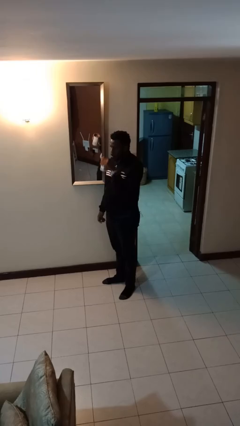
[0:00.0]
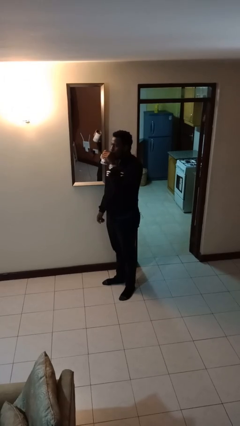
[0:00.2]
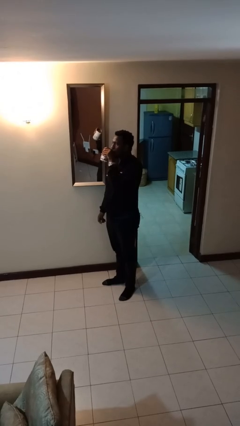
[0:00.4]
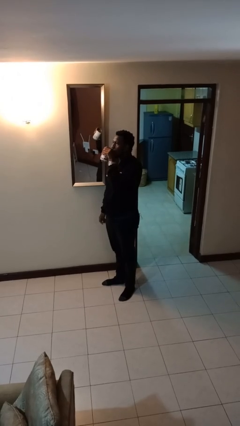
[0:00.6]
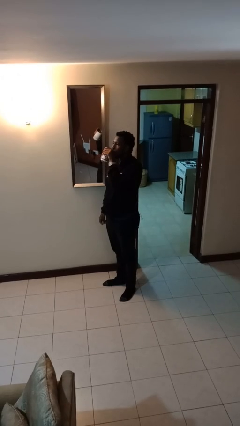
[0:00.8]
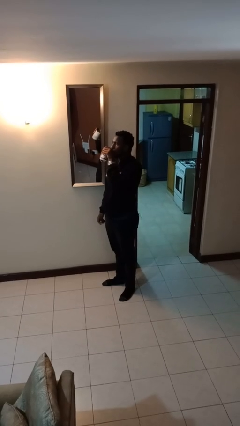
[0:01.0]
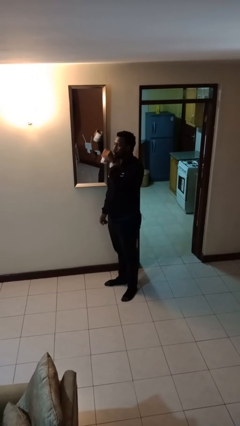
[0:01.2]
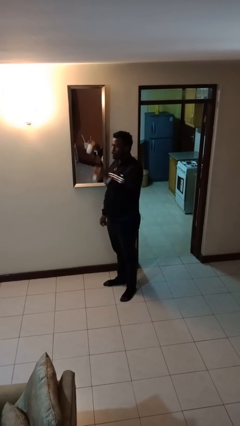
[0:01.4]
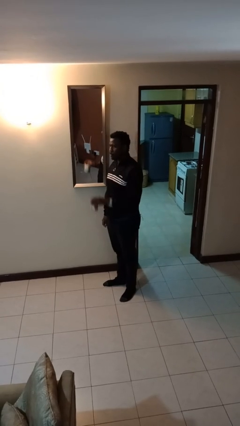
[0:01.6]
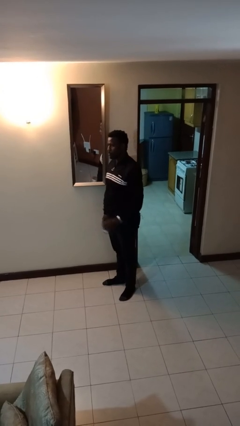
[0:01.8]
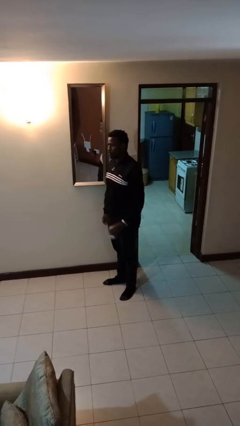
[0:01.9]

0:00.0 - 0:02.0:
person drinks from beverage can

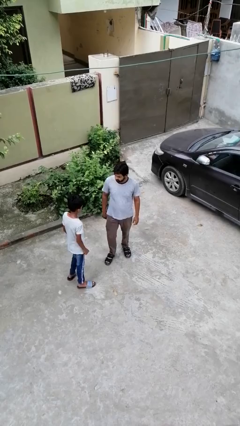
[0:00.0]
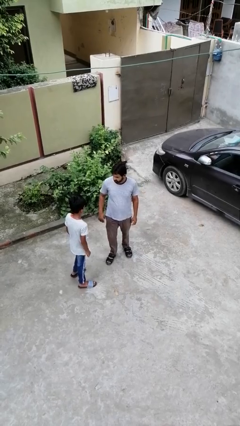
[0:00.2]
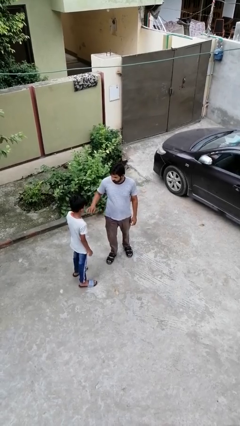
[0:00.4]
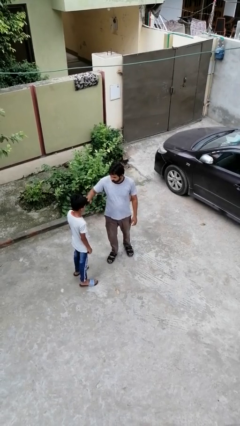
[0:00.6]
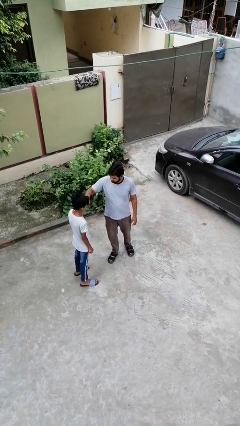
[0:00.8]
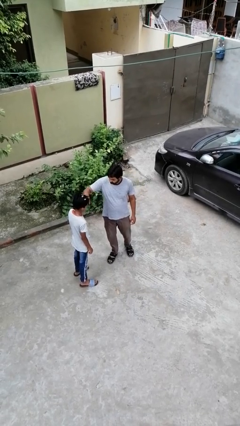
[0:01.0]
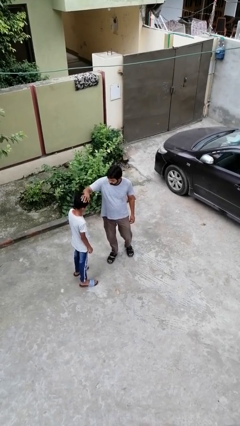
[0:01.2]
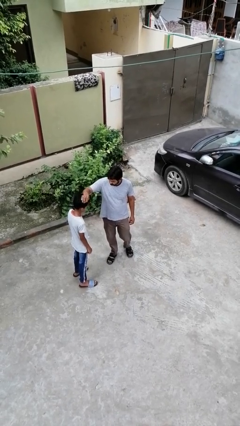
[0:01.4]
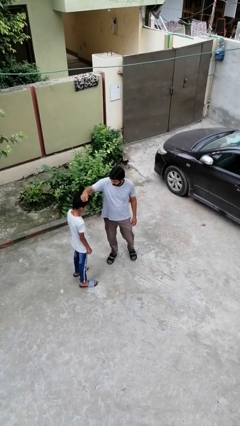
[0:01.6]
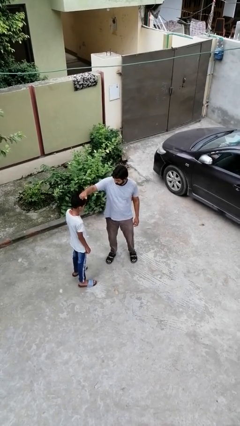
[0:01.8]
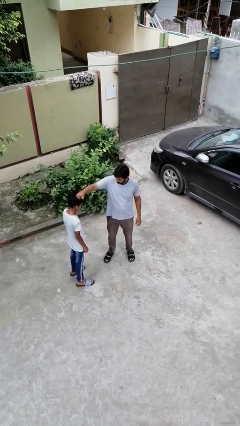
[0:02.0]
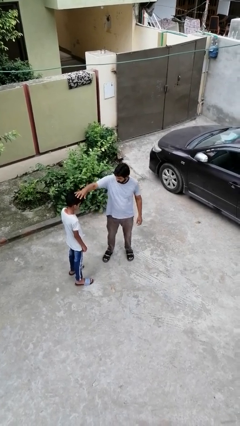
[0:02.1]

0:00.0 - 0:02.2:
person grabs person by hair

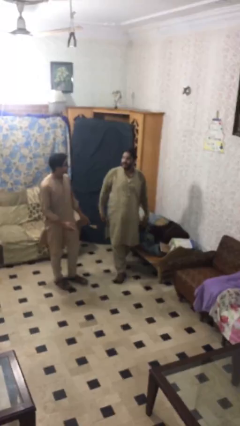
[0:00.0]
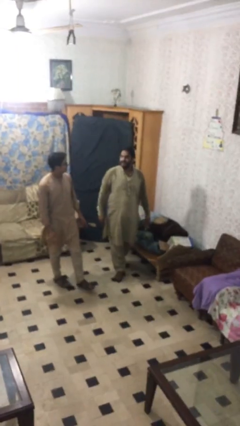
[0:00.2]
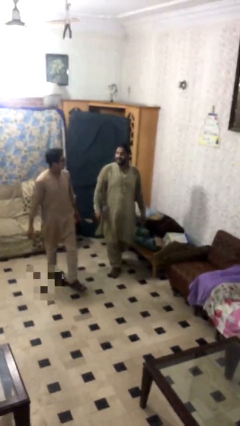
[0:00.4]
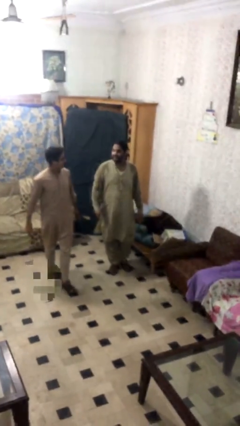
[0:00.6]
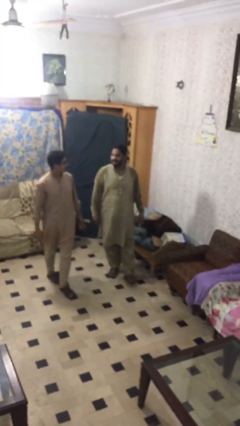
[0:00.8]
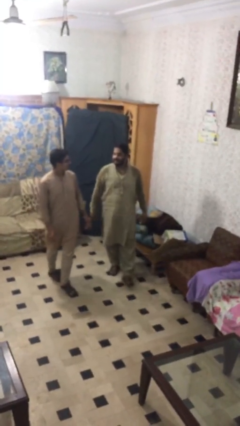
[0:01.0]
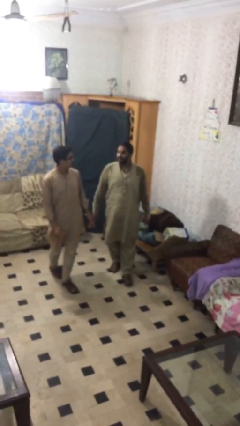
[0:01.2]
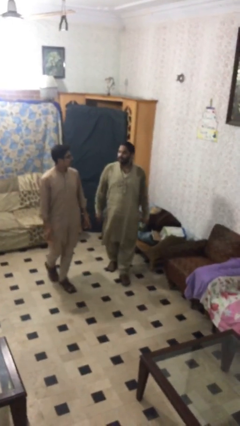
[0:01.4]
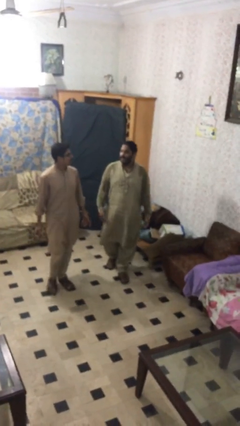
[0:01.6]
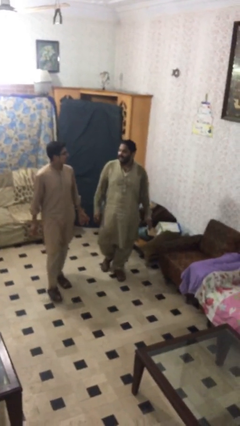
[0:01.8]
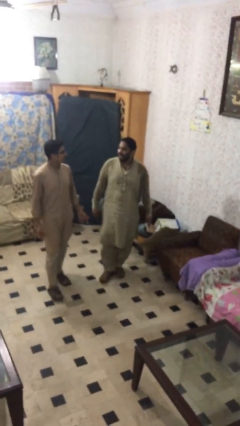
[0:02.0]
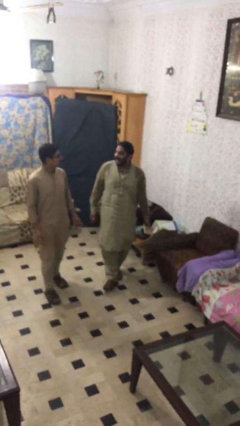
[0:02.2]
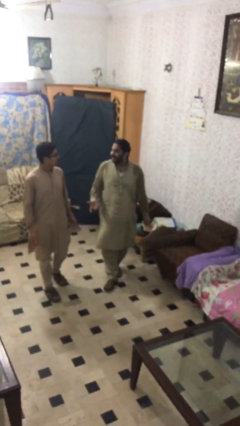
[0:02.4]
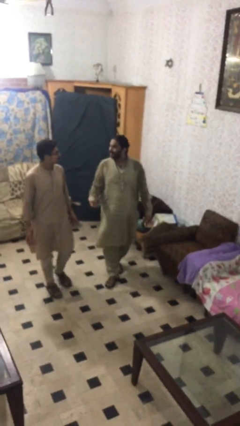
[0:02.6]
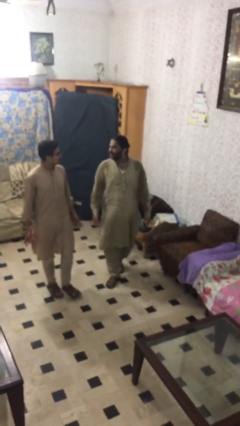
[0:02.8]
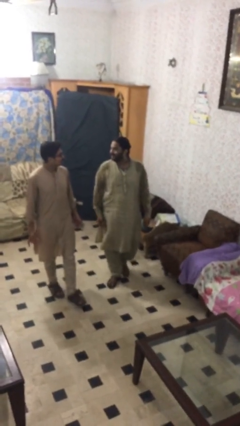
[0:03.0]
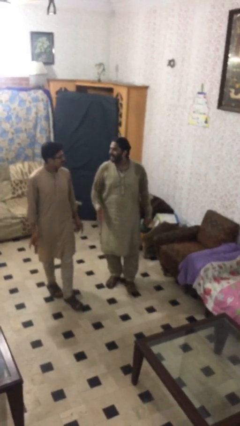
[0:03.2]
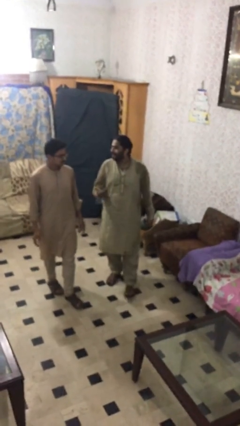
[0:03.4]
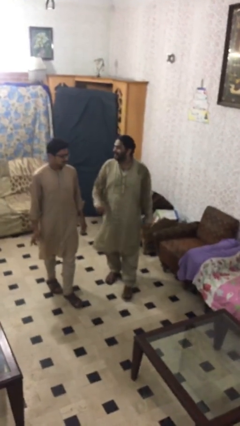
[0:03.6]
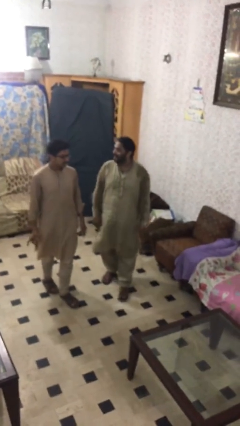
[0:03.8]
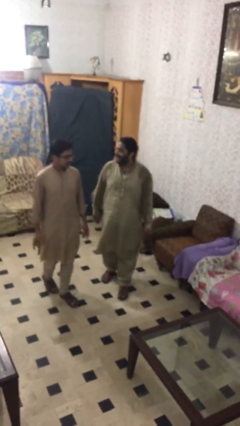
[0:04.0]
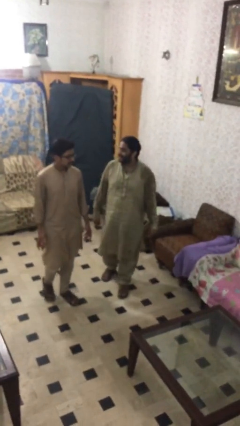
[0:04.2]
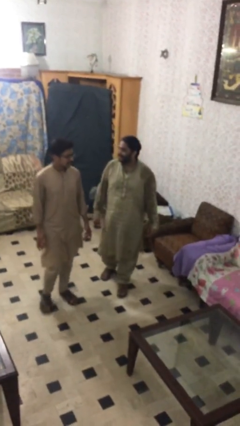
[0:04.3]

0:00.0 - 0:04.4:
person talks to person

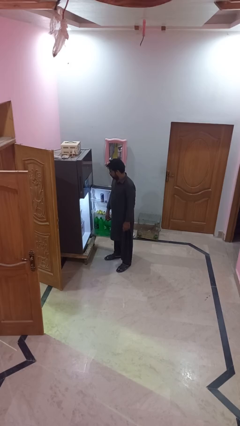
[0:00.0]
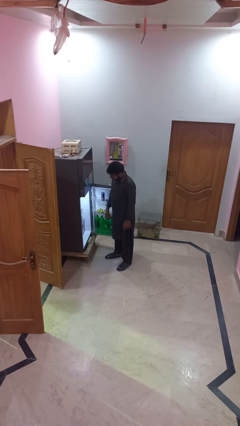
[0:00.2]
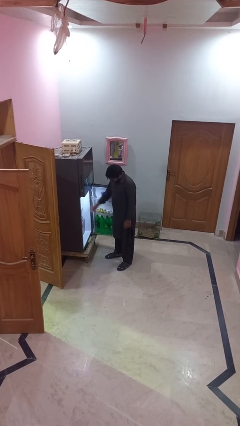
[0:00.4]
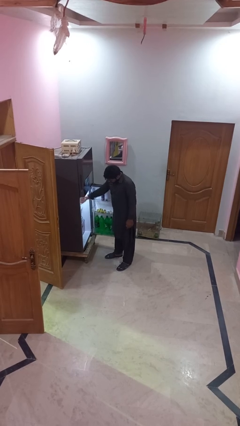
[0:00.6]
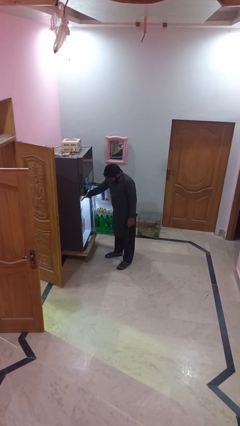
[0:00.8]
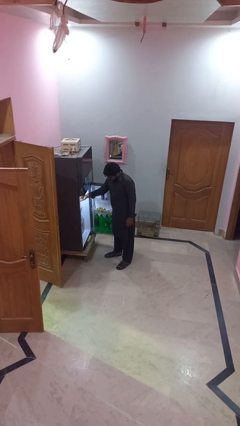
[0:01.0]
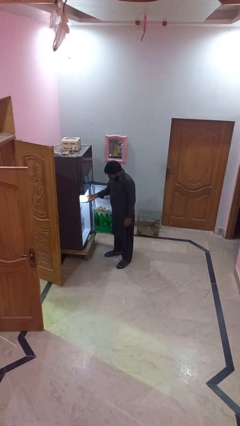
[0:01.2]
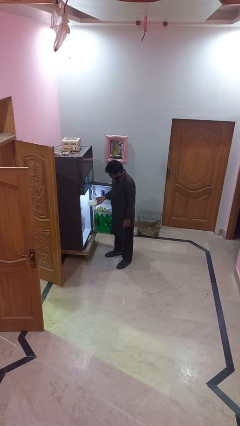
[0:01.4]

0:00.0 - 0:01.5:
person takes object from refrigerator

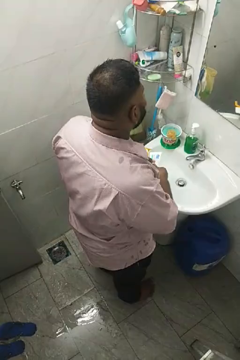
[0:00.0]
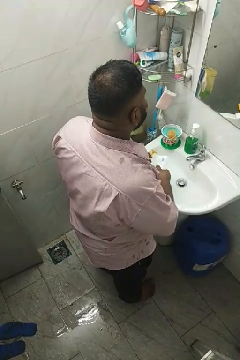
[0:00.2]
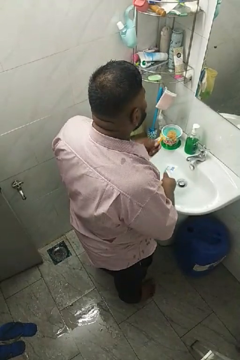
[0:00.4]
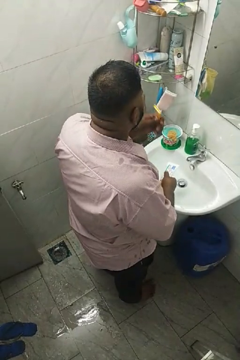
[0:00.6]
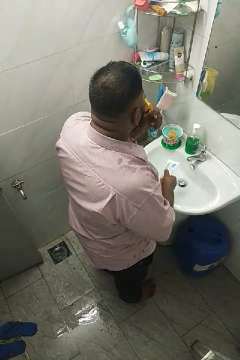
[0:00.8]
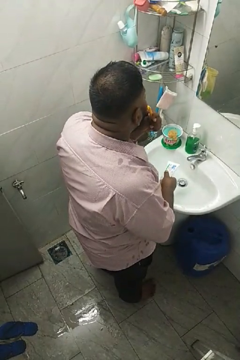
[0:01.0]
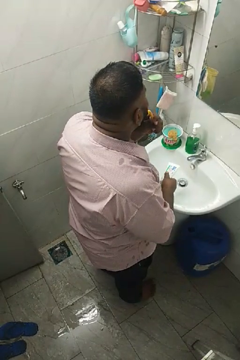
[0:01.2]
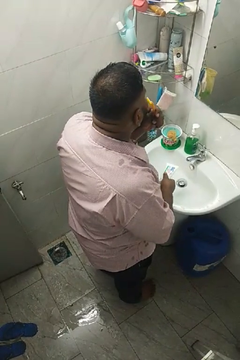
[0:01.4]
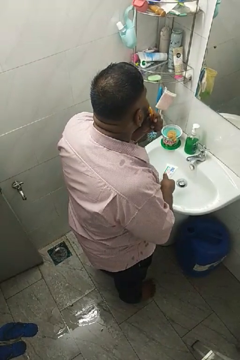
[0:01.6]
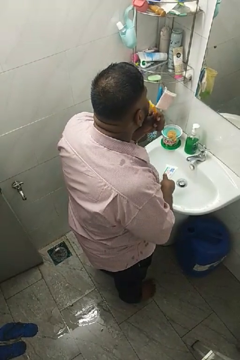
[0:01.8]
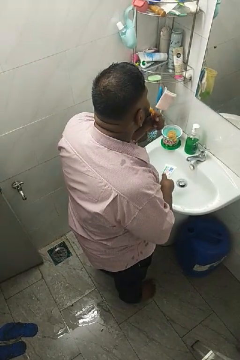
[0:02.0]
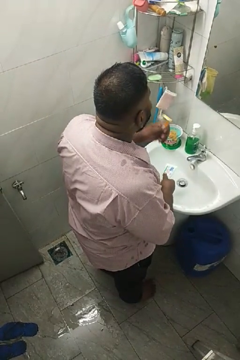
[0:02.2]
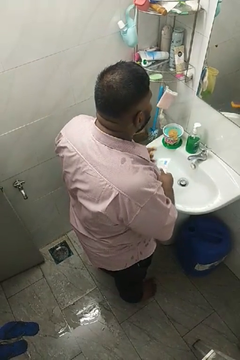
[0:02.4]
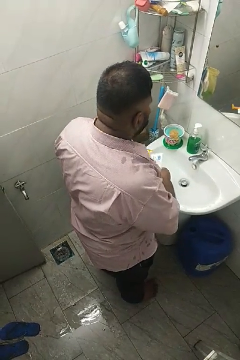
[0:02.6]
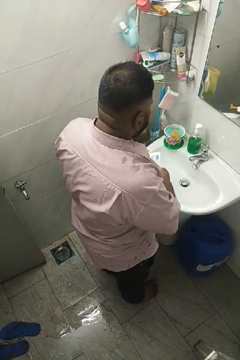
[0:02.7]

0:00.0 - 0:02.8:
person shaves face

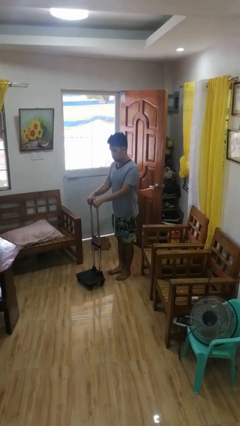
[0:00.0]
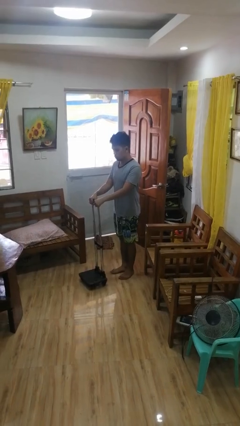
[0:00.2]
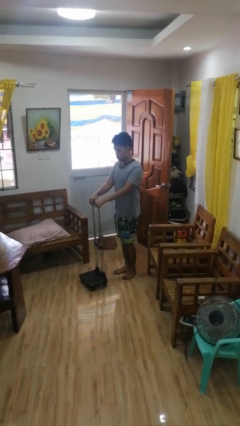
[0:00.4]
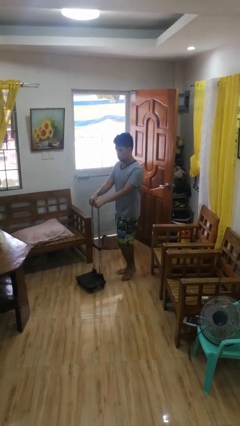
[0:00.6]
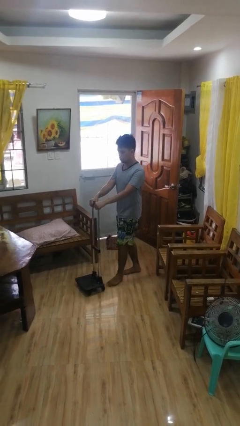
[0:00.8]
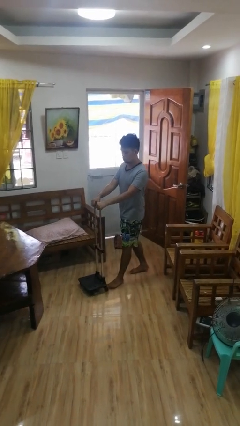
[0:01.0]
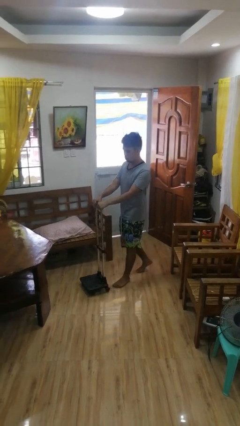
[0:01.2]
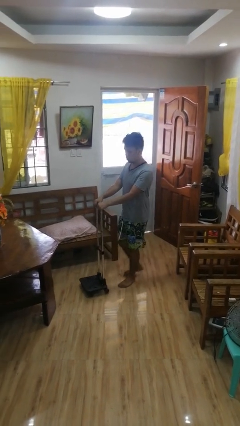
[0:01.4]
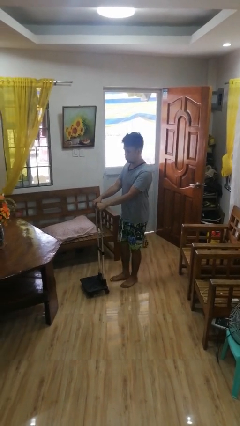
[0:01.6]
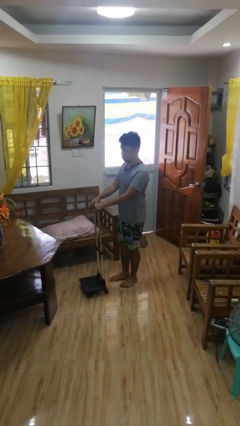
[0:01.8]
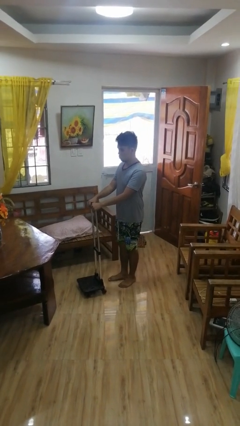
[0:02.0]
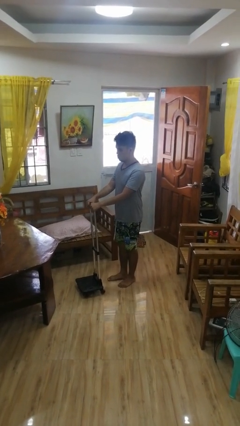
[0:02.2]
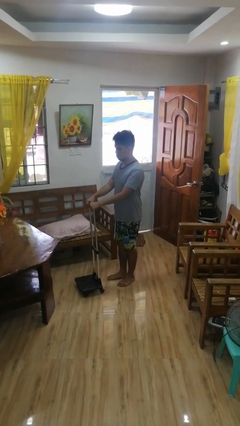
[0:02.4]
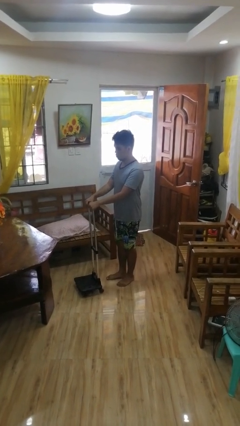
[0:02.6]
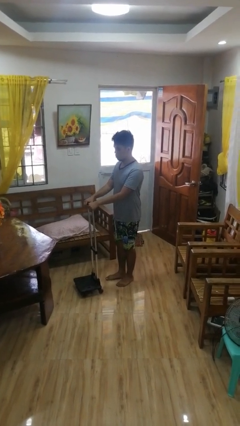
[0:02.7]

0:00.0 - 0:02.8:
person pushes wheeled cart

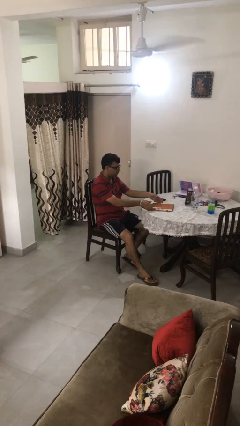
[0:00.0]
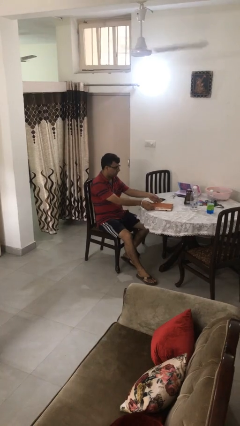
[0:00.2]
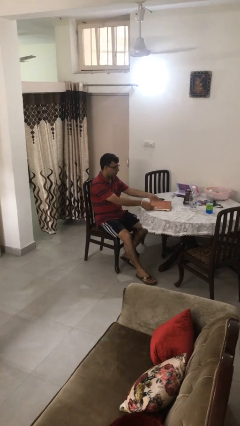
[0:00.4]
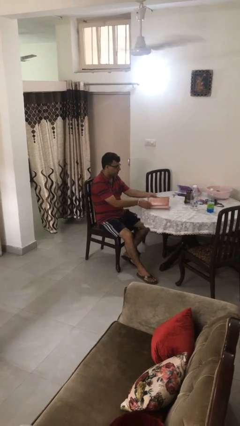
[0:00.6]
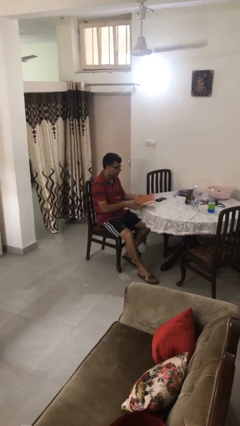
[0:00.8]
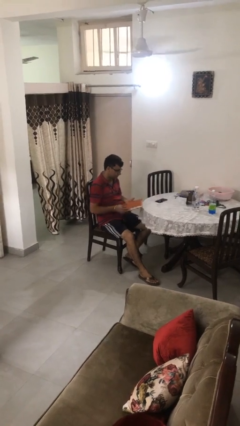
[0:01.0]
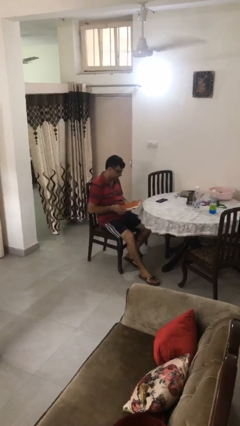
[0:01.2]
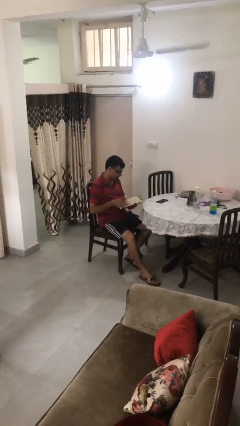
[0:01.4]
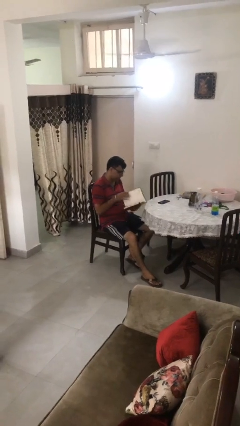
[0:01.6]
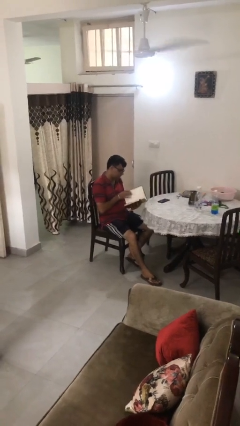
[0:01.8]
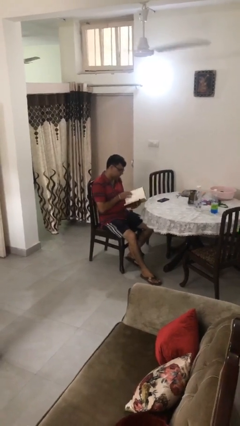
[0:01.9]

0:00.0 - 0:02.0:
person picks up object from table
